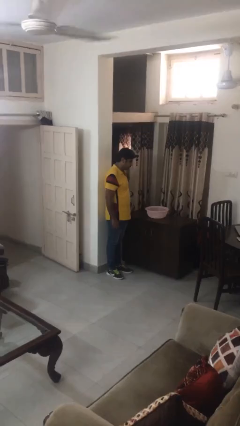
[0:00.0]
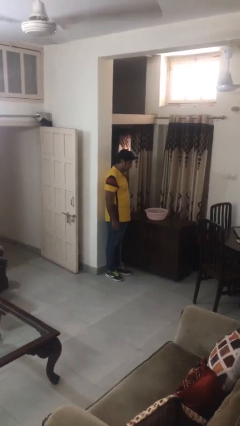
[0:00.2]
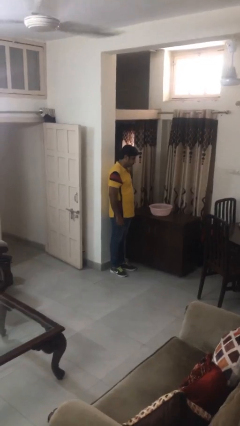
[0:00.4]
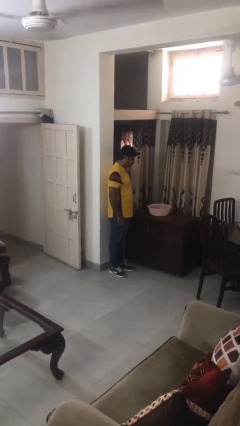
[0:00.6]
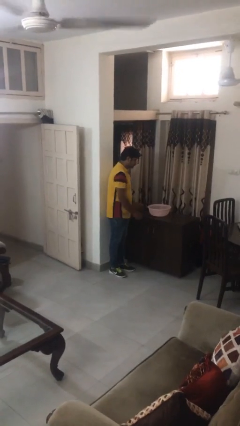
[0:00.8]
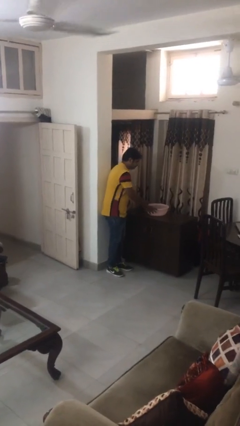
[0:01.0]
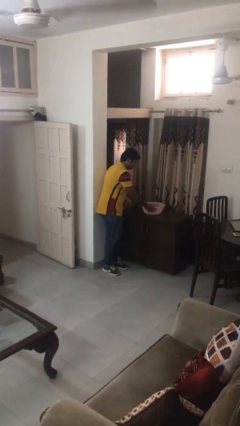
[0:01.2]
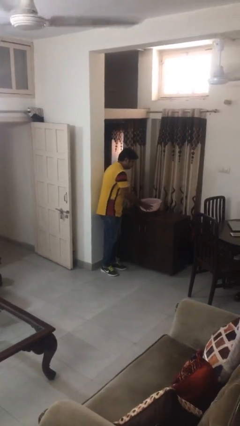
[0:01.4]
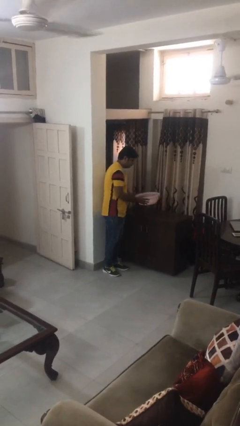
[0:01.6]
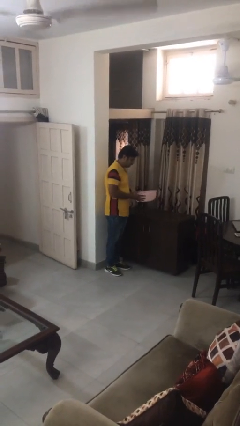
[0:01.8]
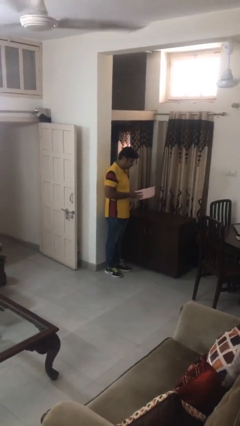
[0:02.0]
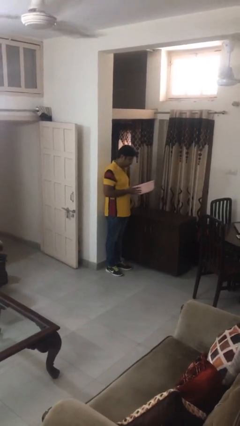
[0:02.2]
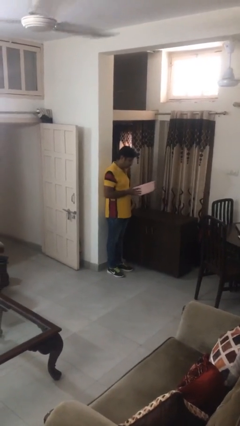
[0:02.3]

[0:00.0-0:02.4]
person picks up object from countertop

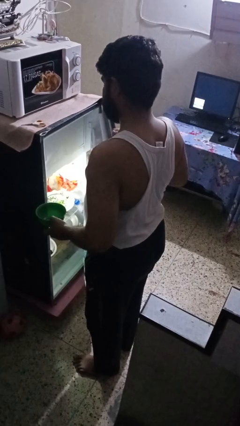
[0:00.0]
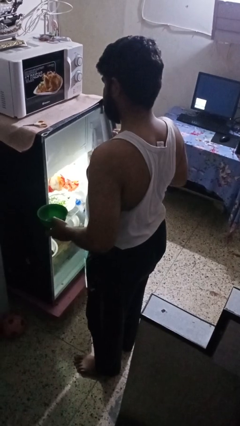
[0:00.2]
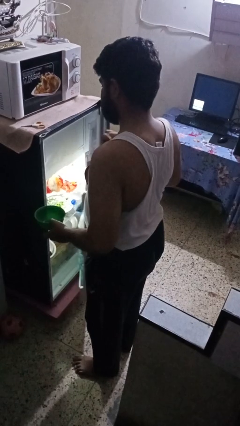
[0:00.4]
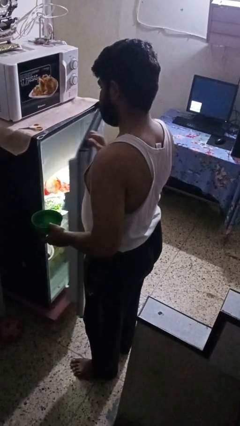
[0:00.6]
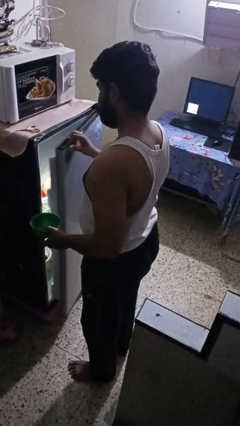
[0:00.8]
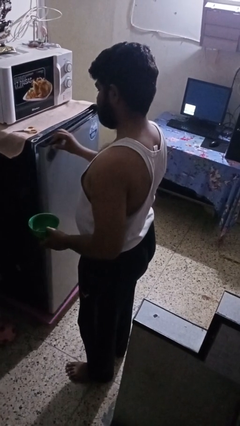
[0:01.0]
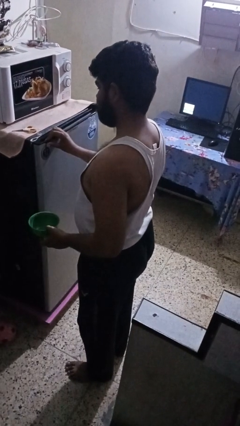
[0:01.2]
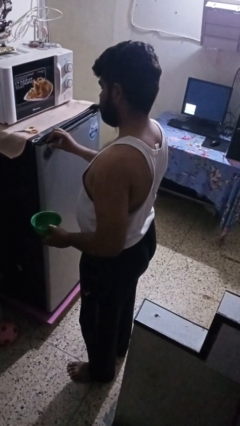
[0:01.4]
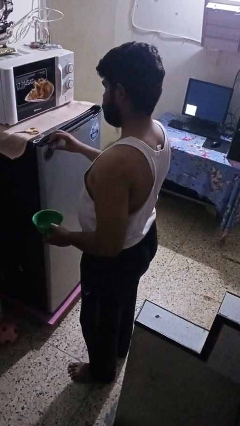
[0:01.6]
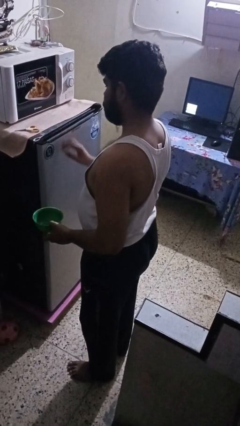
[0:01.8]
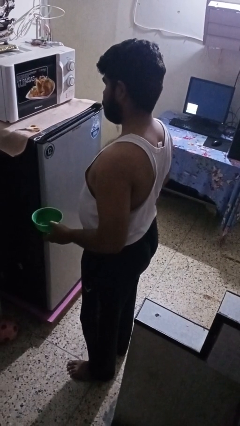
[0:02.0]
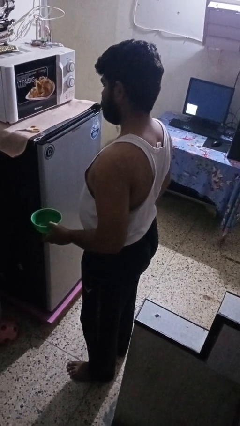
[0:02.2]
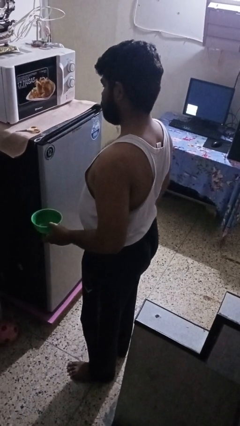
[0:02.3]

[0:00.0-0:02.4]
person closes refrigerator

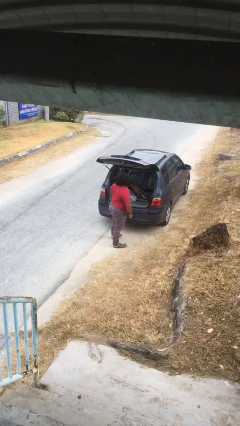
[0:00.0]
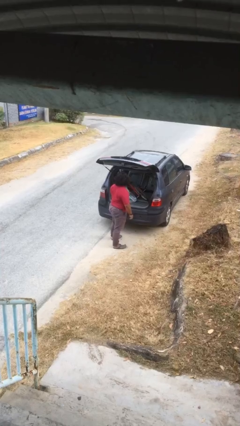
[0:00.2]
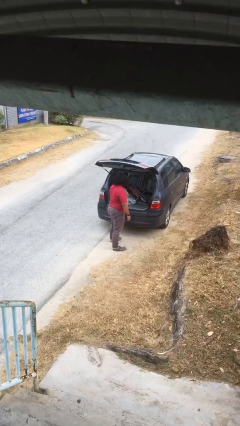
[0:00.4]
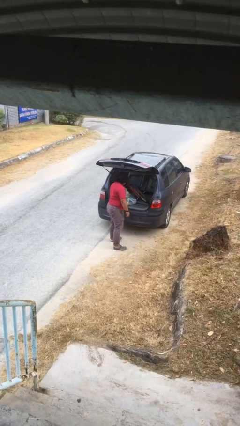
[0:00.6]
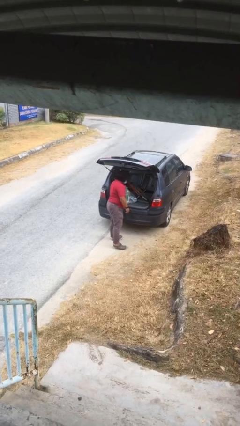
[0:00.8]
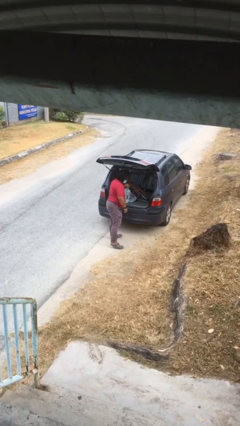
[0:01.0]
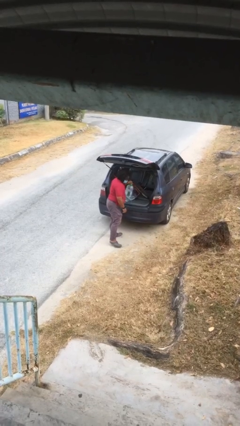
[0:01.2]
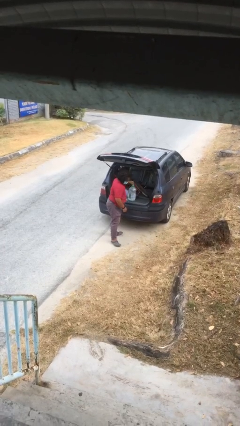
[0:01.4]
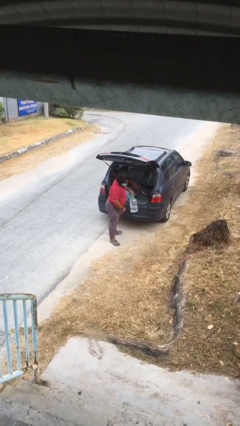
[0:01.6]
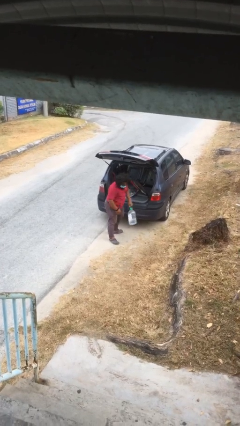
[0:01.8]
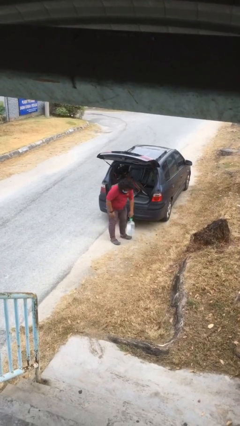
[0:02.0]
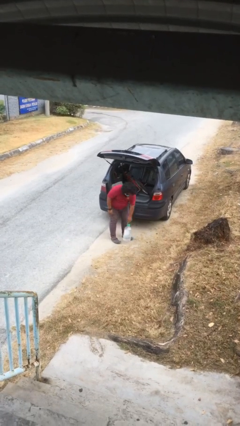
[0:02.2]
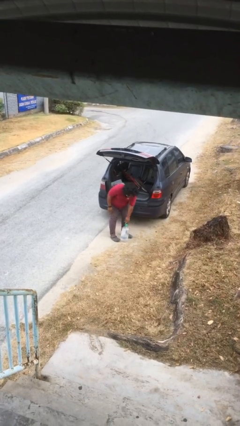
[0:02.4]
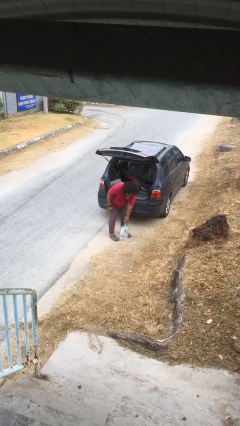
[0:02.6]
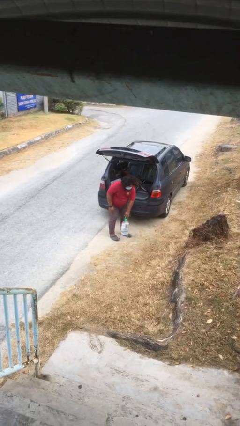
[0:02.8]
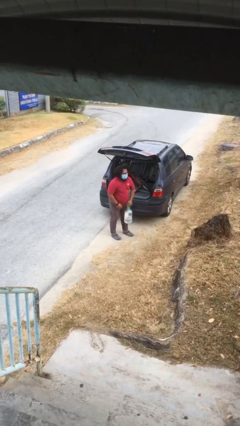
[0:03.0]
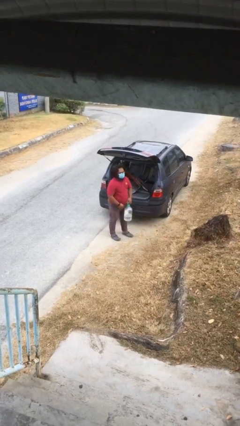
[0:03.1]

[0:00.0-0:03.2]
person unloads car

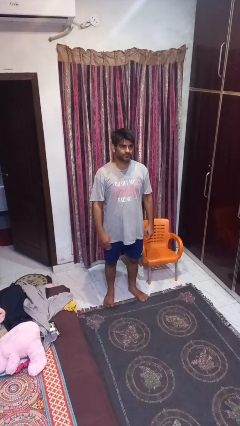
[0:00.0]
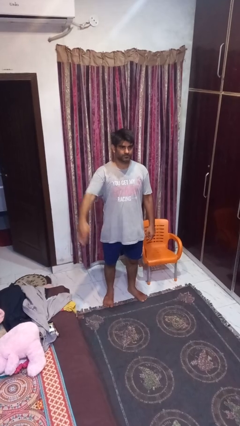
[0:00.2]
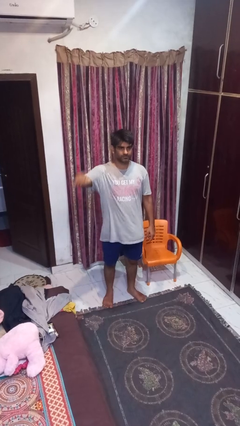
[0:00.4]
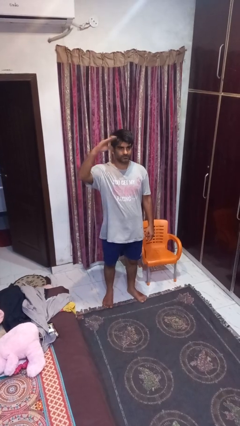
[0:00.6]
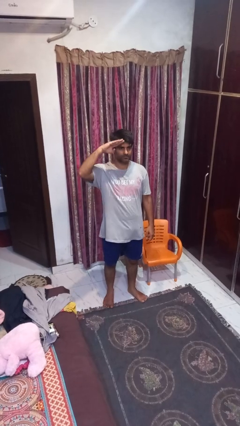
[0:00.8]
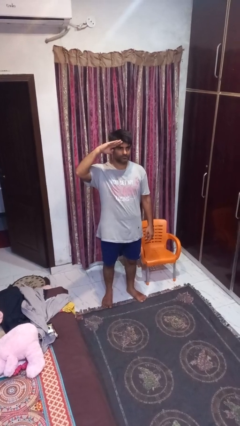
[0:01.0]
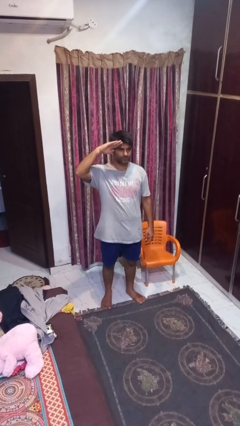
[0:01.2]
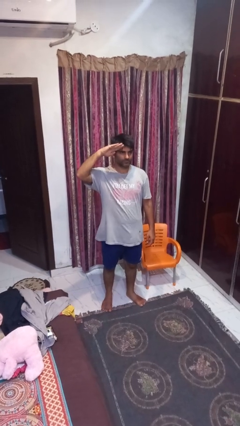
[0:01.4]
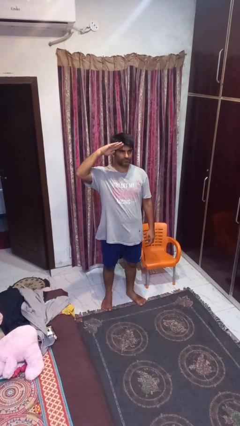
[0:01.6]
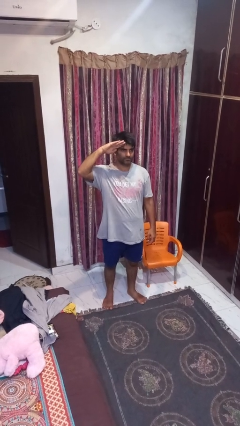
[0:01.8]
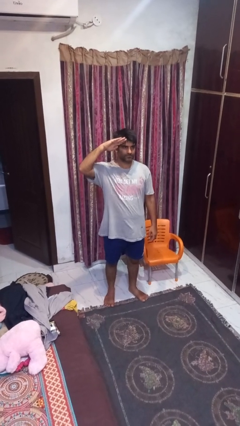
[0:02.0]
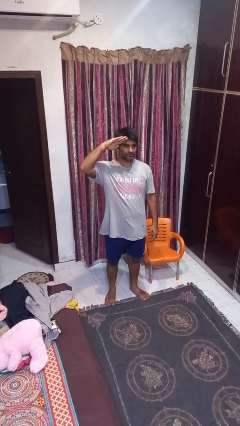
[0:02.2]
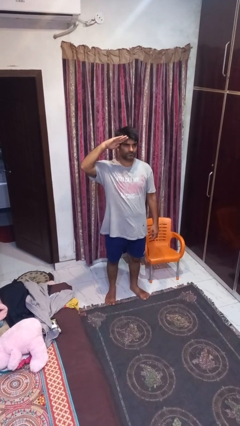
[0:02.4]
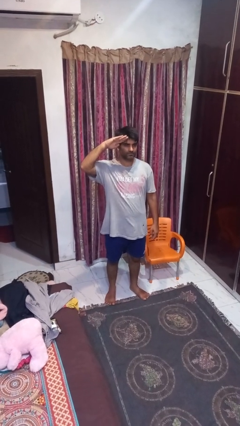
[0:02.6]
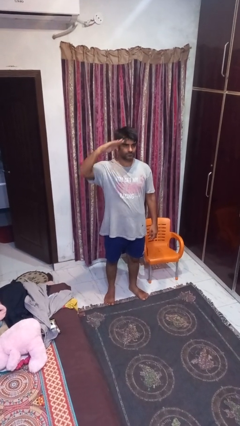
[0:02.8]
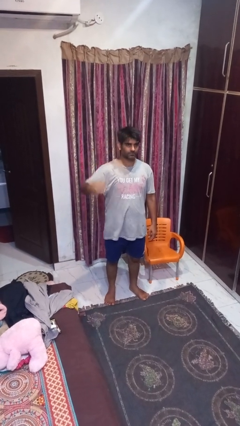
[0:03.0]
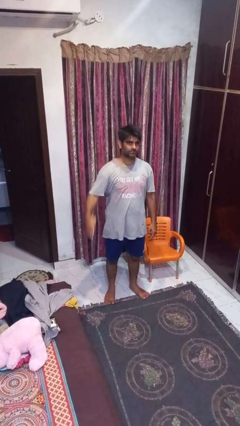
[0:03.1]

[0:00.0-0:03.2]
person salutes

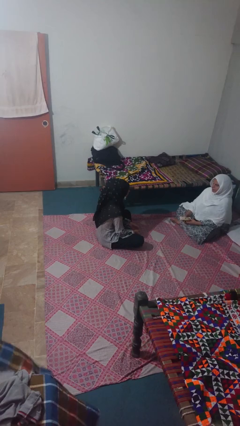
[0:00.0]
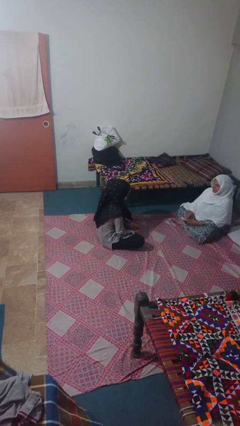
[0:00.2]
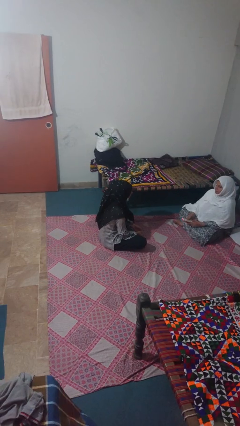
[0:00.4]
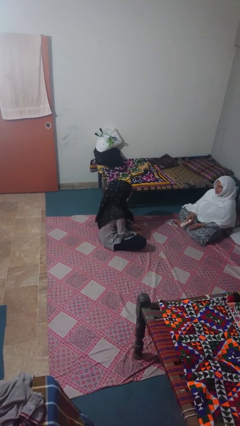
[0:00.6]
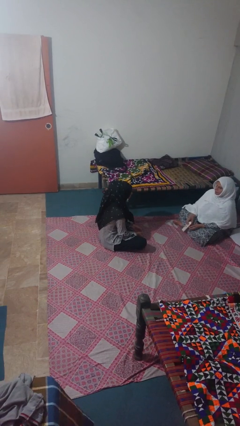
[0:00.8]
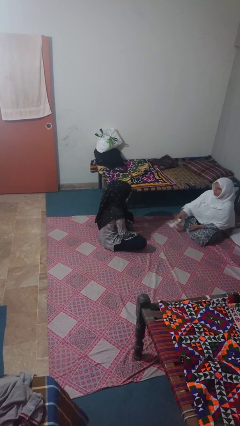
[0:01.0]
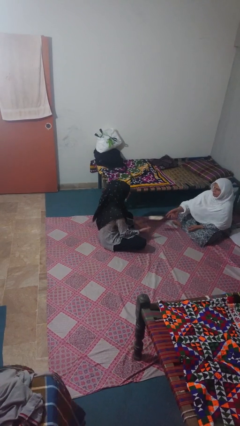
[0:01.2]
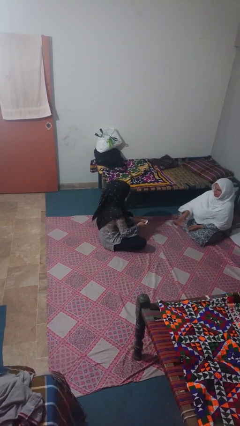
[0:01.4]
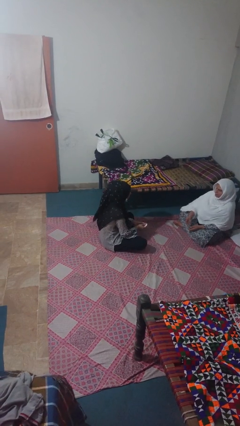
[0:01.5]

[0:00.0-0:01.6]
person catches object from person

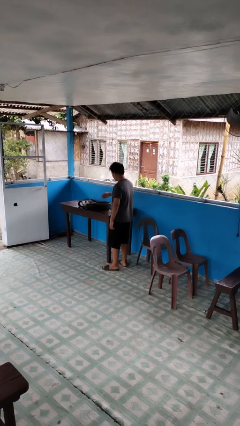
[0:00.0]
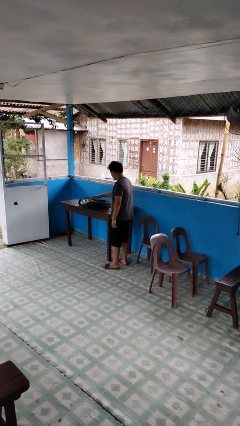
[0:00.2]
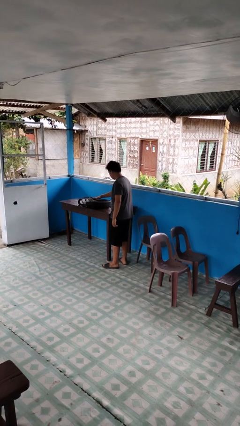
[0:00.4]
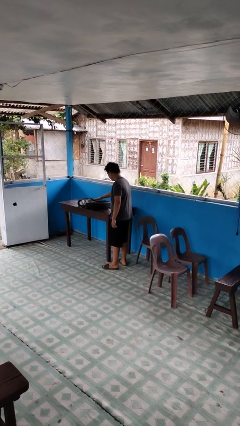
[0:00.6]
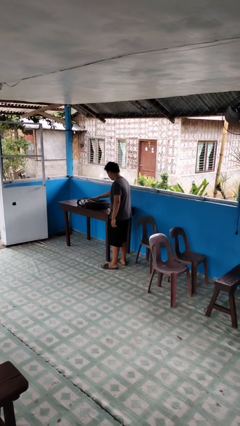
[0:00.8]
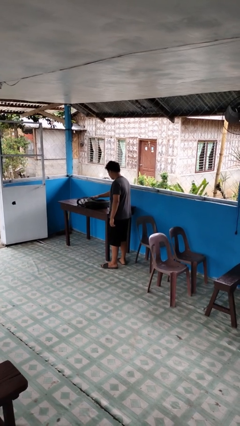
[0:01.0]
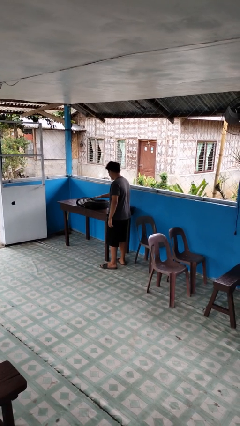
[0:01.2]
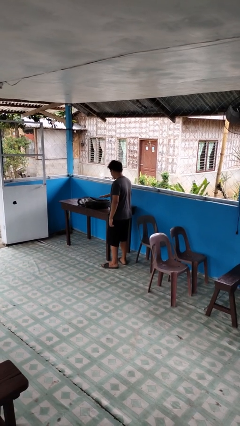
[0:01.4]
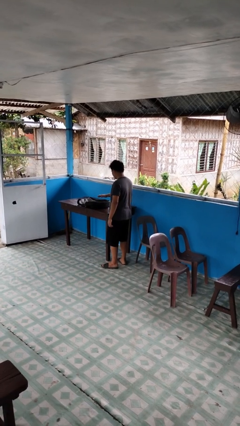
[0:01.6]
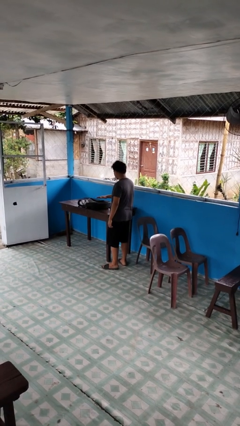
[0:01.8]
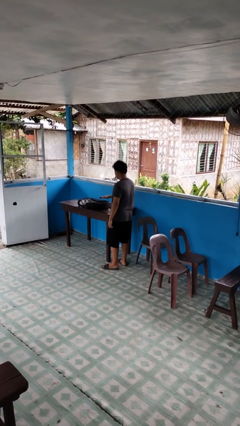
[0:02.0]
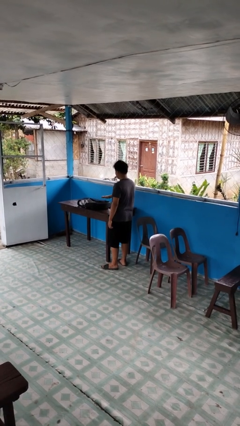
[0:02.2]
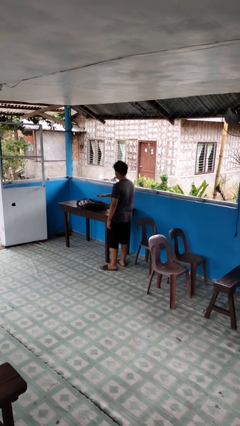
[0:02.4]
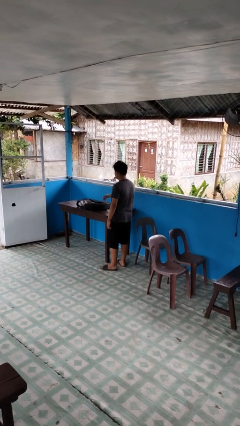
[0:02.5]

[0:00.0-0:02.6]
person waves hand over object

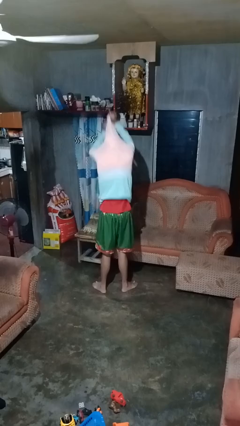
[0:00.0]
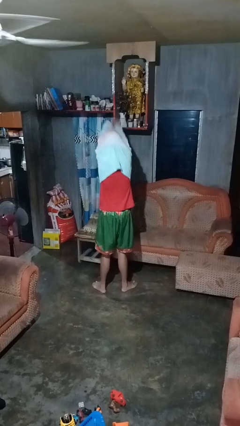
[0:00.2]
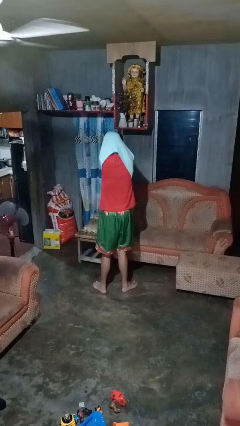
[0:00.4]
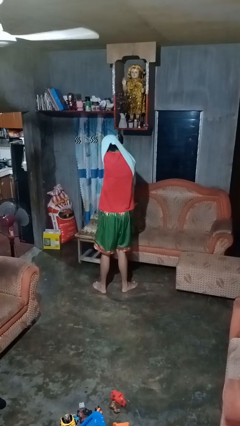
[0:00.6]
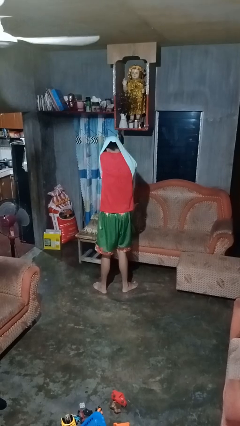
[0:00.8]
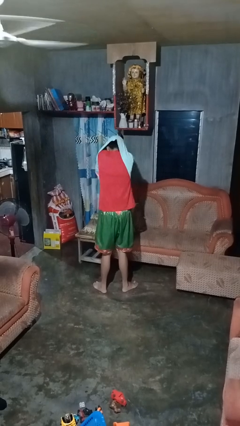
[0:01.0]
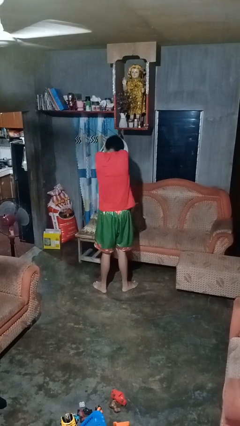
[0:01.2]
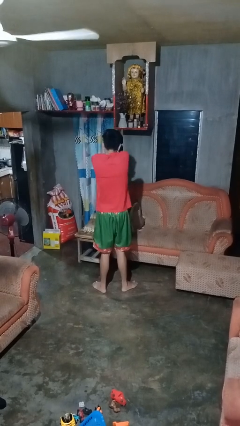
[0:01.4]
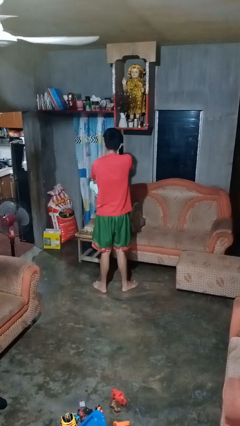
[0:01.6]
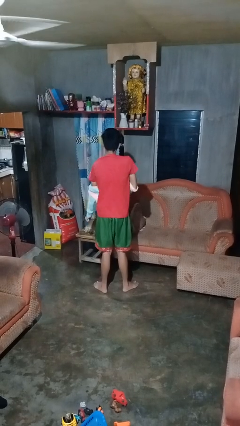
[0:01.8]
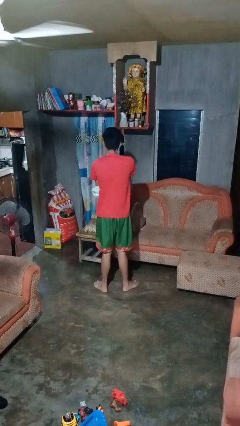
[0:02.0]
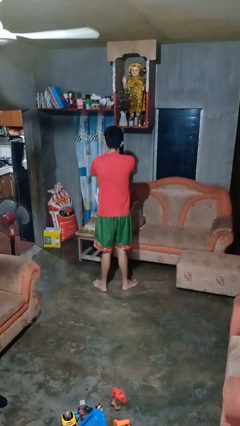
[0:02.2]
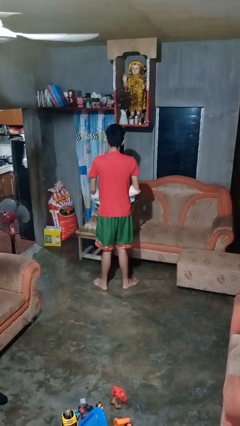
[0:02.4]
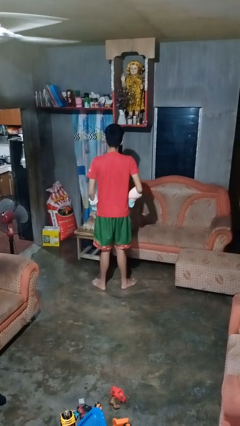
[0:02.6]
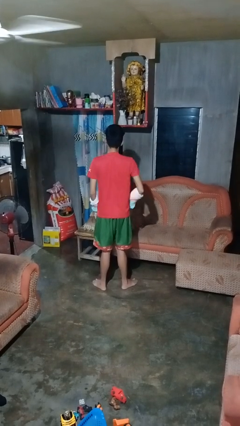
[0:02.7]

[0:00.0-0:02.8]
person takes off hoodie
